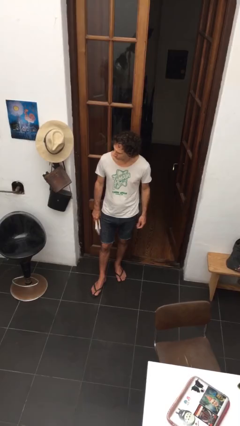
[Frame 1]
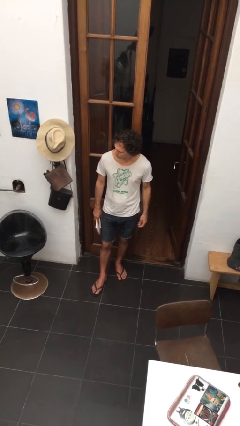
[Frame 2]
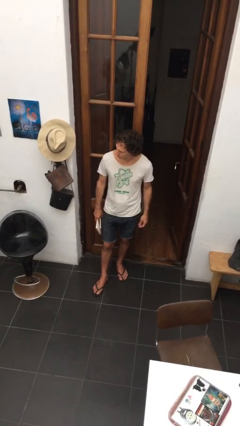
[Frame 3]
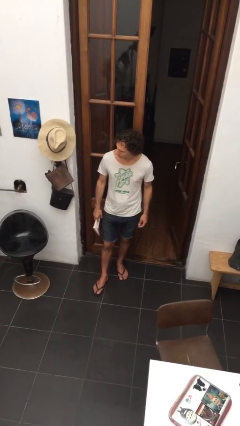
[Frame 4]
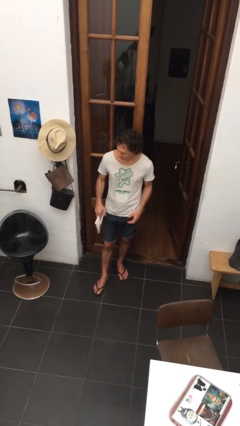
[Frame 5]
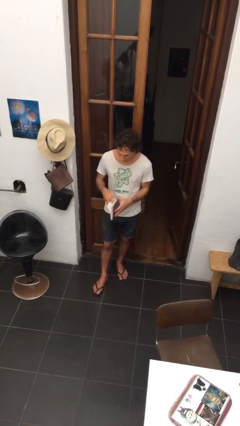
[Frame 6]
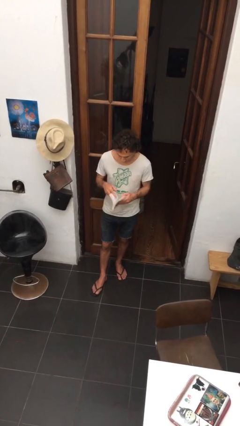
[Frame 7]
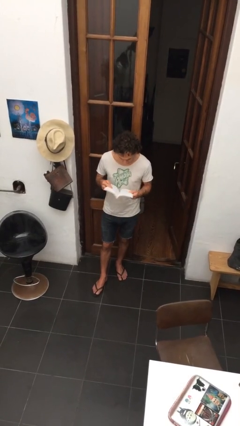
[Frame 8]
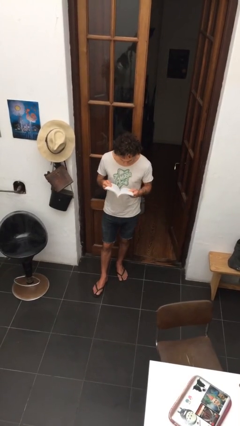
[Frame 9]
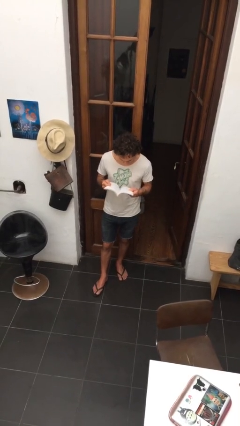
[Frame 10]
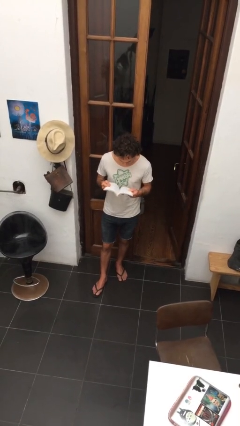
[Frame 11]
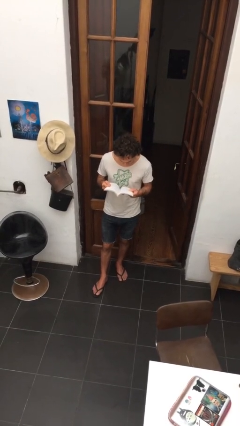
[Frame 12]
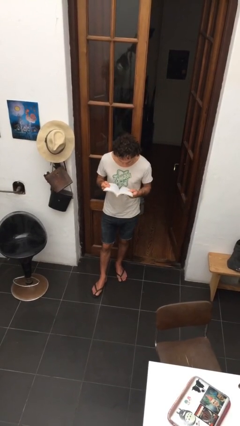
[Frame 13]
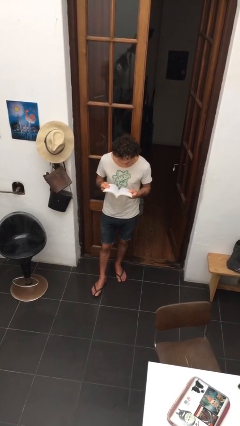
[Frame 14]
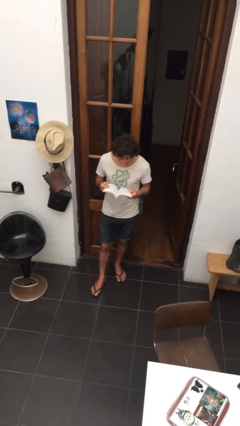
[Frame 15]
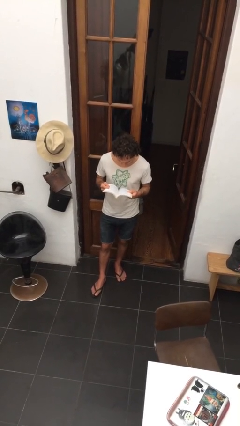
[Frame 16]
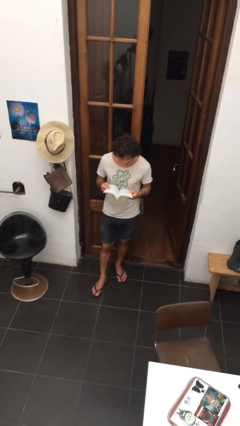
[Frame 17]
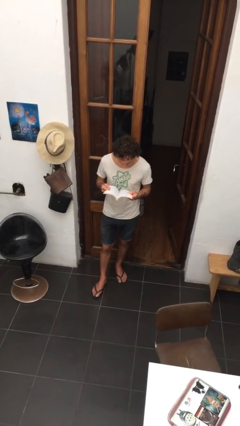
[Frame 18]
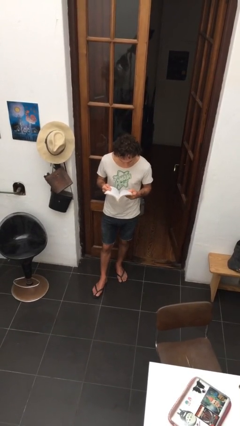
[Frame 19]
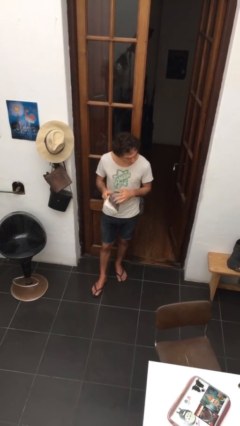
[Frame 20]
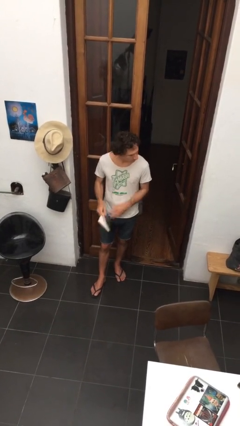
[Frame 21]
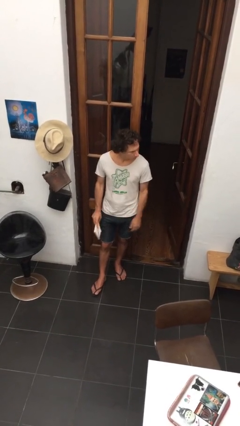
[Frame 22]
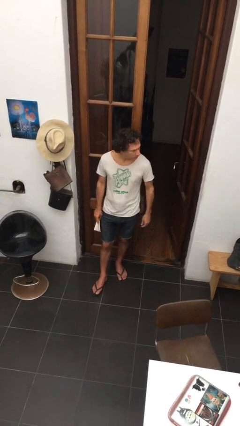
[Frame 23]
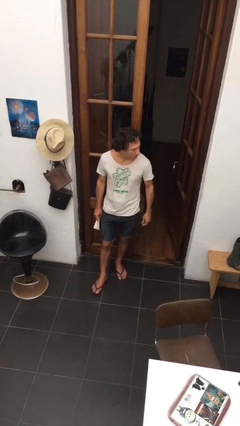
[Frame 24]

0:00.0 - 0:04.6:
person reads document

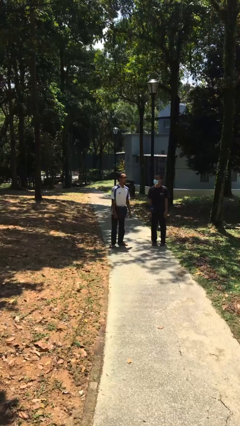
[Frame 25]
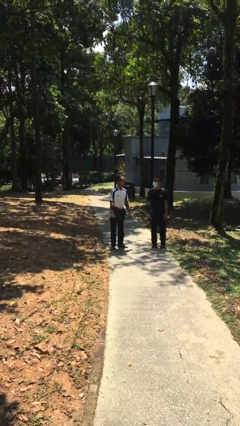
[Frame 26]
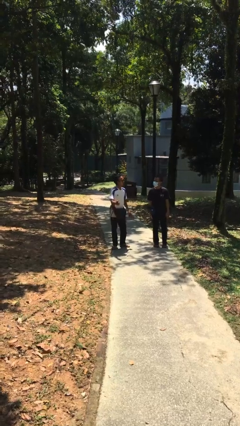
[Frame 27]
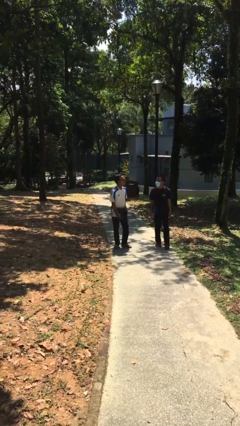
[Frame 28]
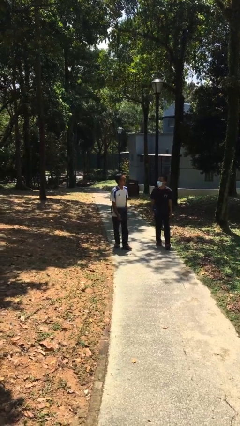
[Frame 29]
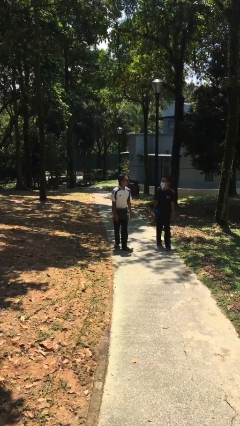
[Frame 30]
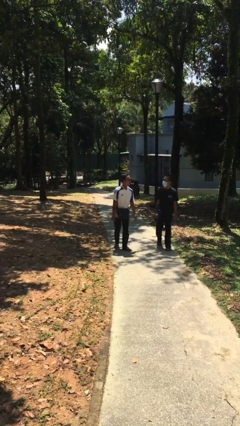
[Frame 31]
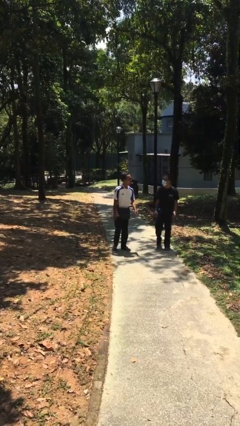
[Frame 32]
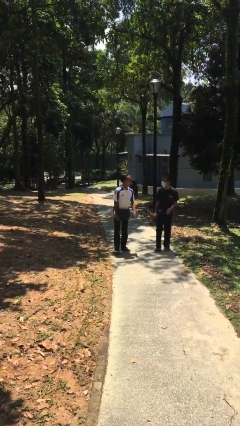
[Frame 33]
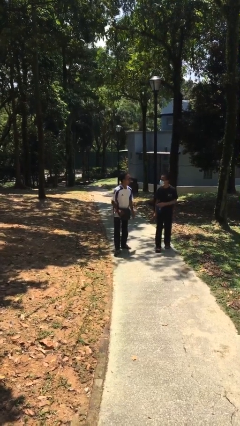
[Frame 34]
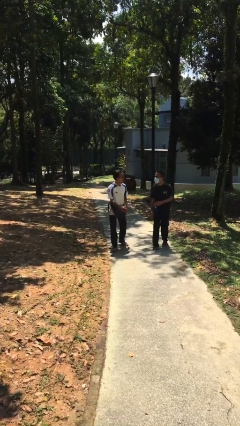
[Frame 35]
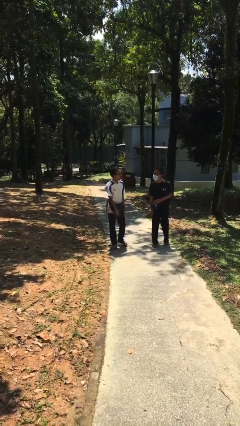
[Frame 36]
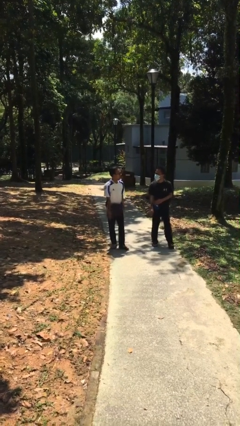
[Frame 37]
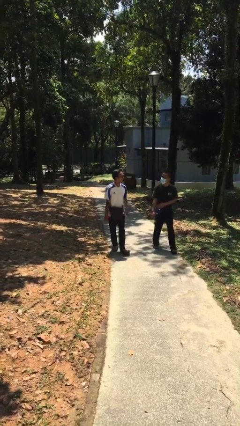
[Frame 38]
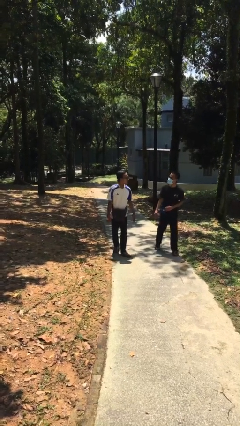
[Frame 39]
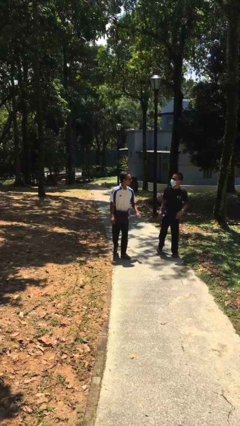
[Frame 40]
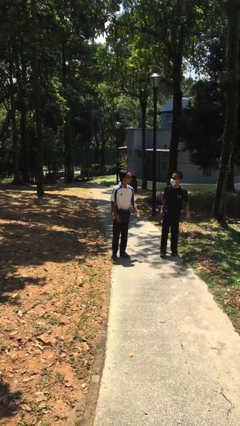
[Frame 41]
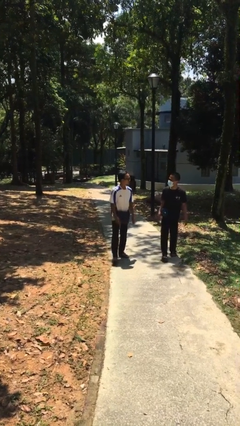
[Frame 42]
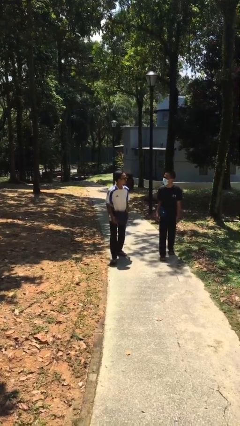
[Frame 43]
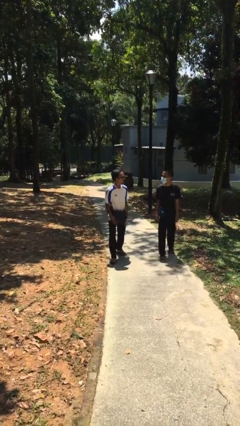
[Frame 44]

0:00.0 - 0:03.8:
person talks to person

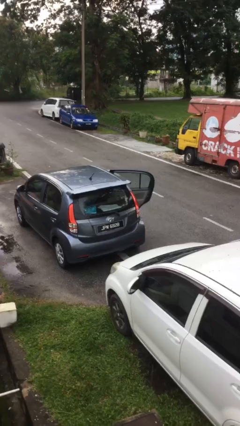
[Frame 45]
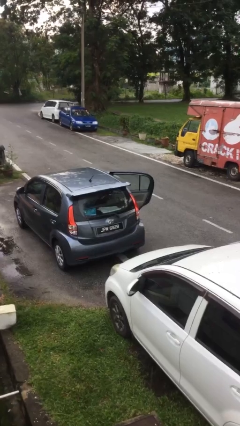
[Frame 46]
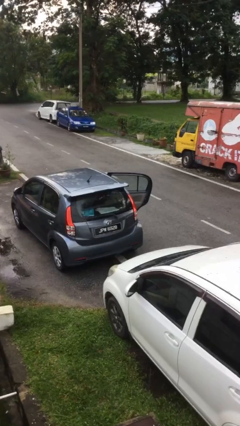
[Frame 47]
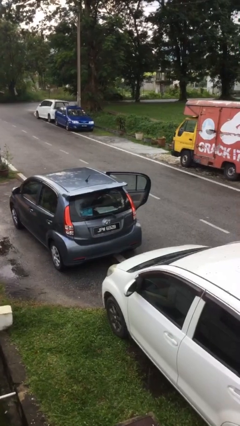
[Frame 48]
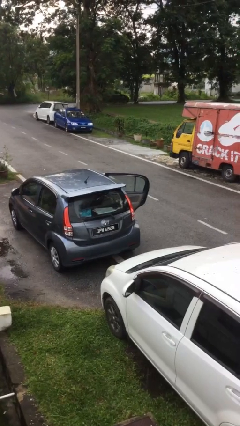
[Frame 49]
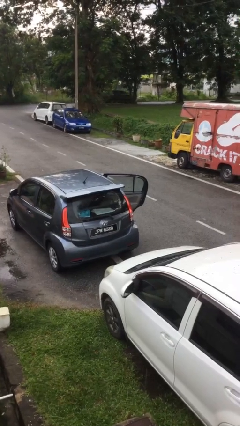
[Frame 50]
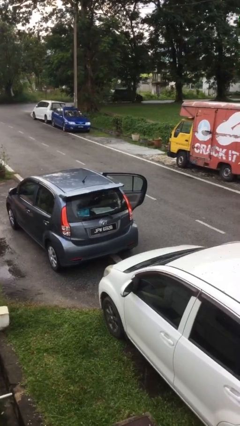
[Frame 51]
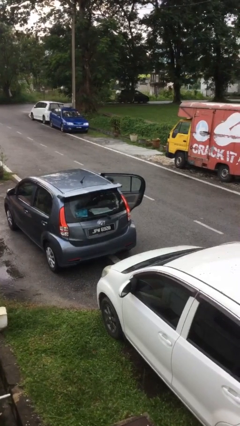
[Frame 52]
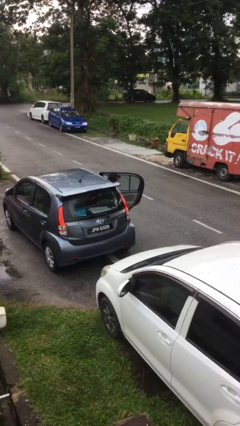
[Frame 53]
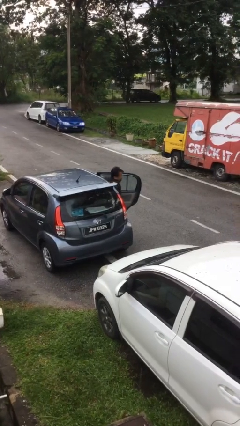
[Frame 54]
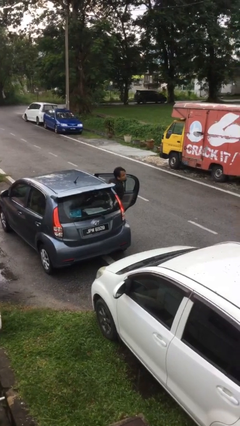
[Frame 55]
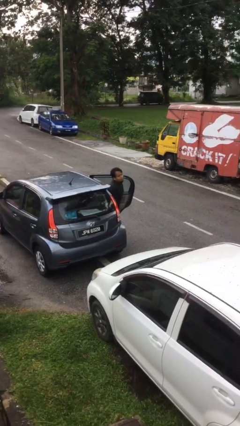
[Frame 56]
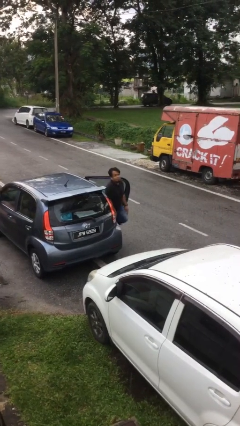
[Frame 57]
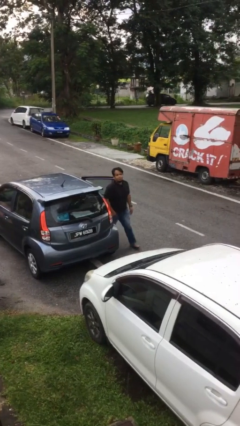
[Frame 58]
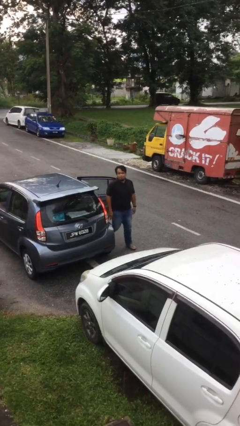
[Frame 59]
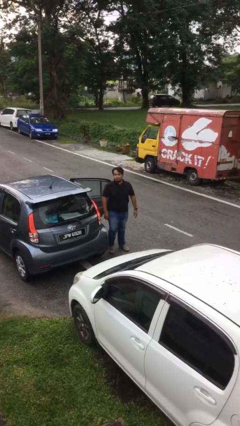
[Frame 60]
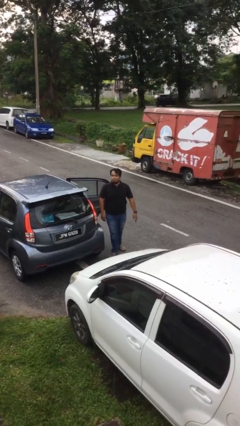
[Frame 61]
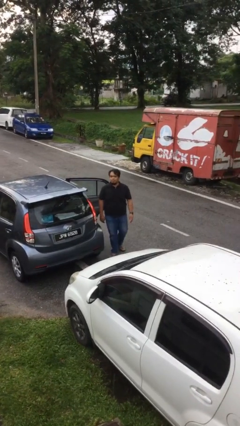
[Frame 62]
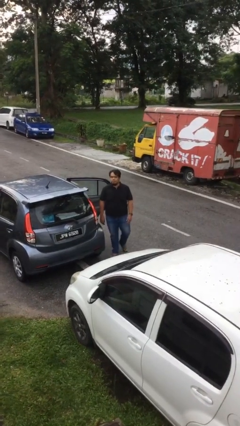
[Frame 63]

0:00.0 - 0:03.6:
person exits car

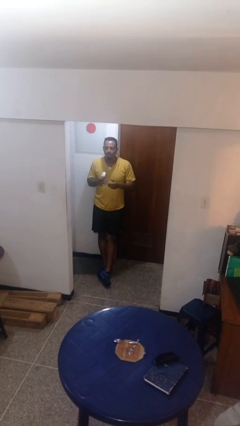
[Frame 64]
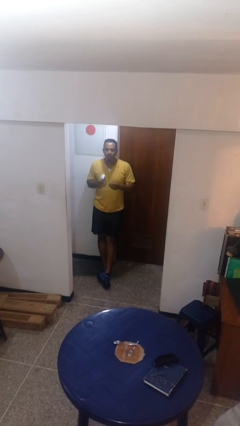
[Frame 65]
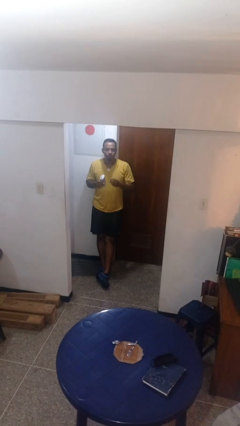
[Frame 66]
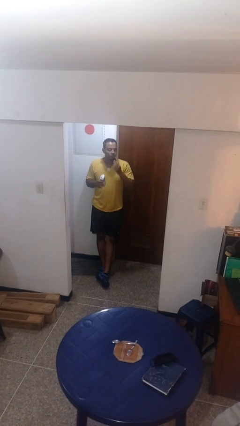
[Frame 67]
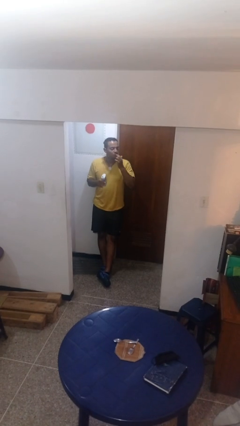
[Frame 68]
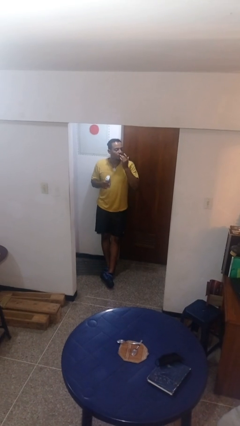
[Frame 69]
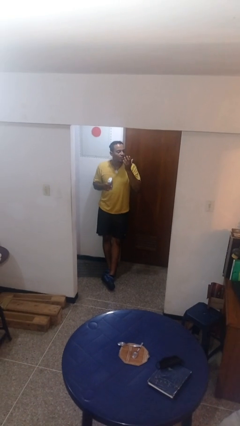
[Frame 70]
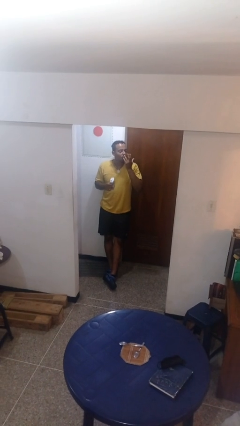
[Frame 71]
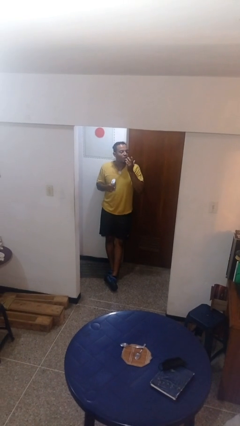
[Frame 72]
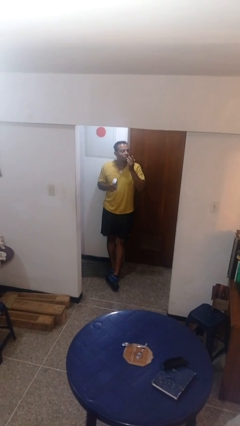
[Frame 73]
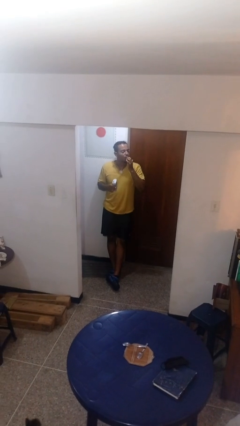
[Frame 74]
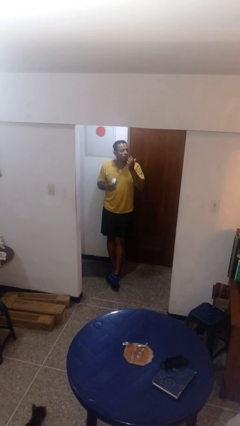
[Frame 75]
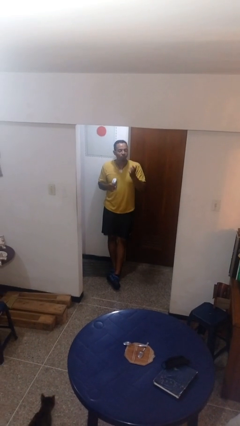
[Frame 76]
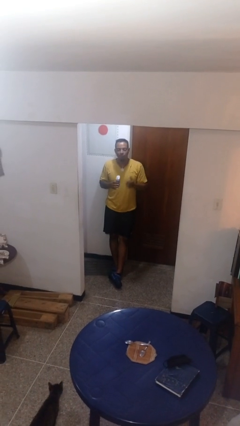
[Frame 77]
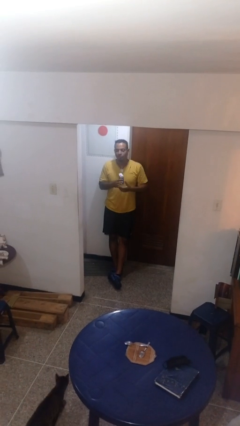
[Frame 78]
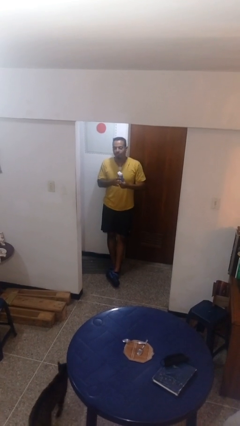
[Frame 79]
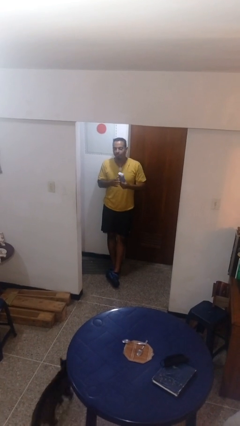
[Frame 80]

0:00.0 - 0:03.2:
person licks fingers

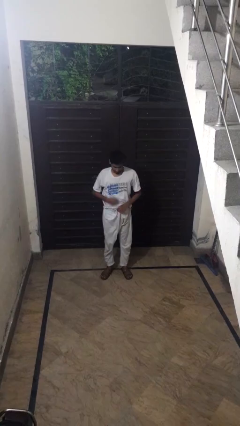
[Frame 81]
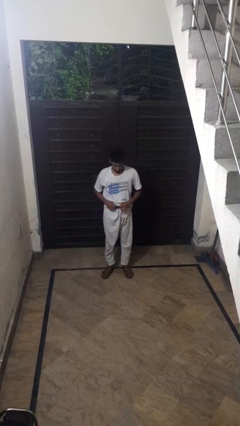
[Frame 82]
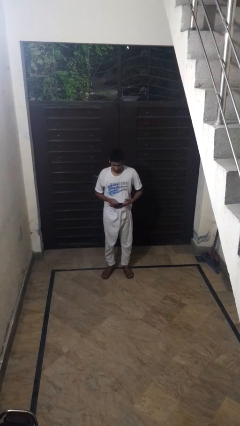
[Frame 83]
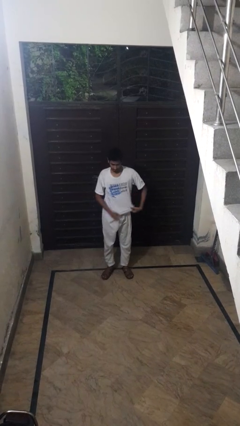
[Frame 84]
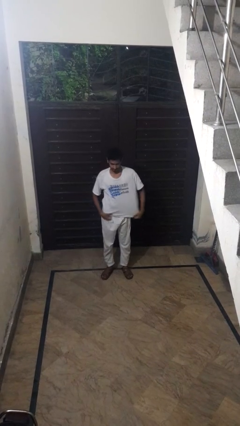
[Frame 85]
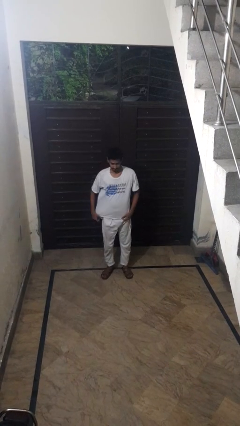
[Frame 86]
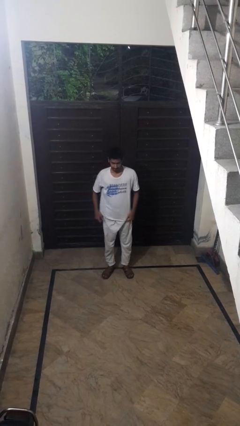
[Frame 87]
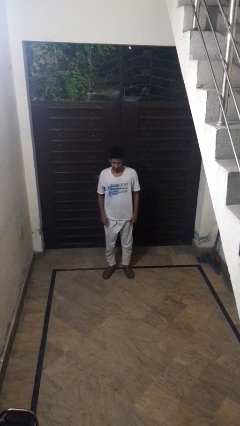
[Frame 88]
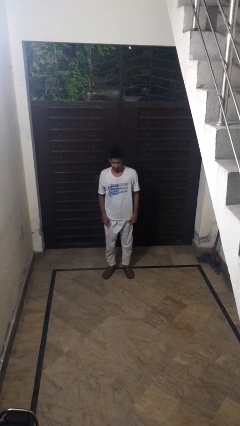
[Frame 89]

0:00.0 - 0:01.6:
person untucks shirt

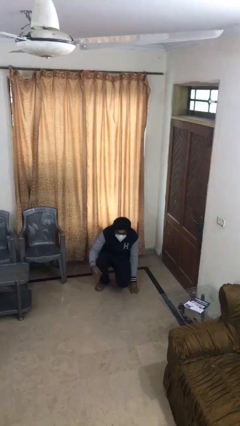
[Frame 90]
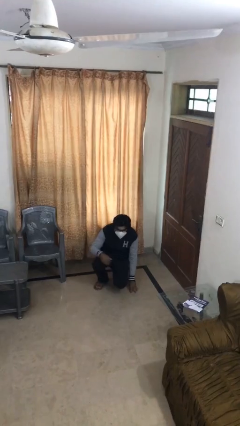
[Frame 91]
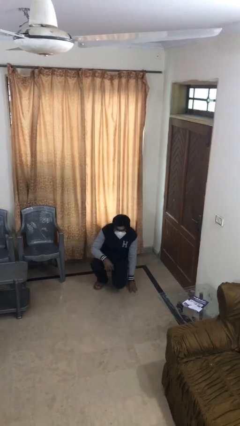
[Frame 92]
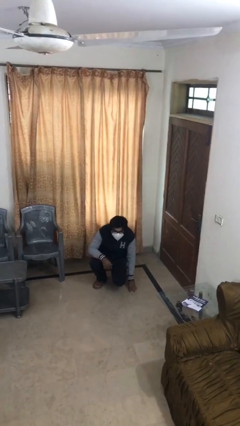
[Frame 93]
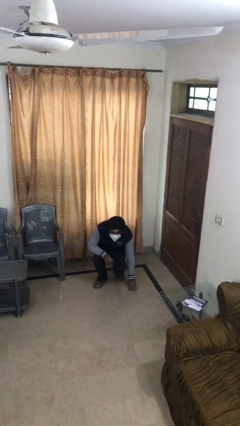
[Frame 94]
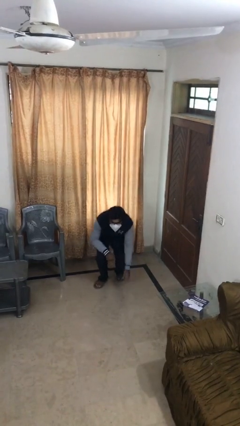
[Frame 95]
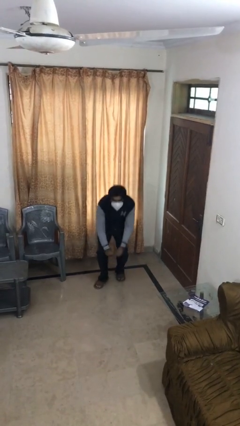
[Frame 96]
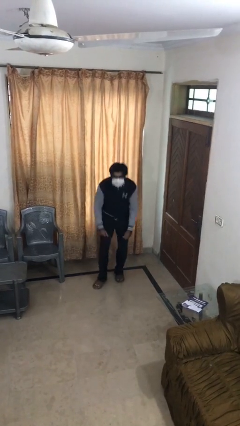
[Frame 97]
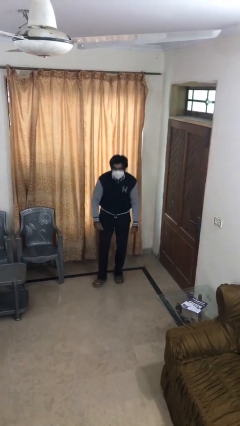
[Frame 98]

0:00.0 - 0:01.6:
person stands up
